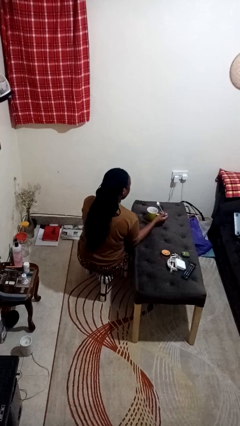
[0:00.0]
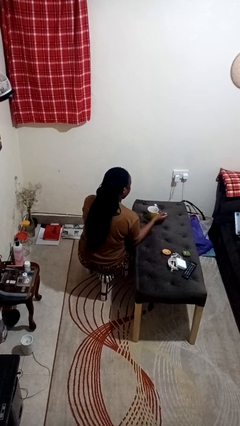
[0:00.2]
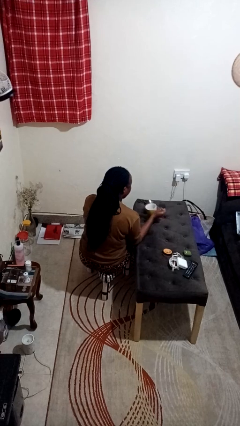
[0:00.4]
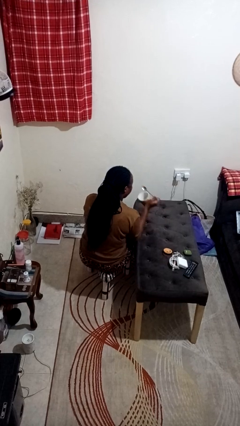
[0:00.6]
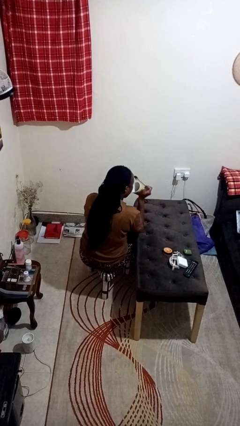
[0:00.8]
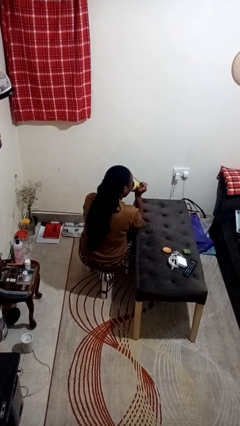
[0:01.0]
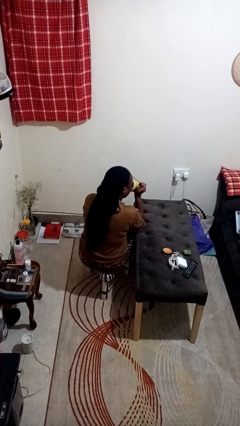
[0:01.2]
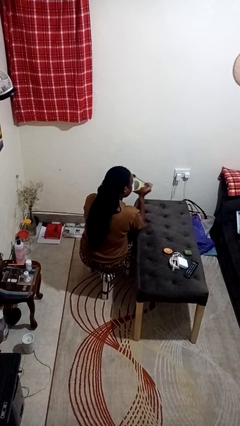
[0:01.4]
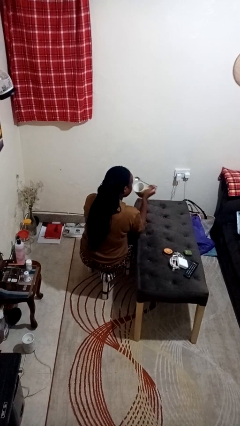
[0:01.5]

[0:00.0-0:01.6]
person drinks from mug

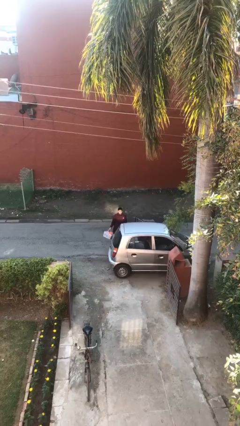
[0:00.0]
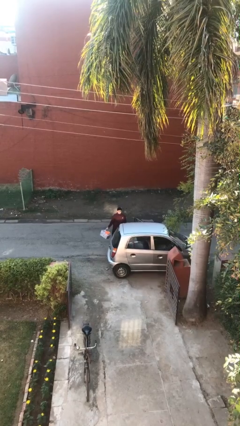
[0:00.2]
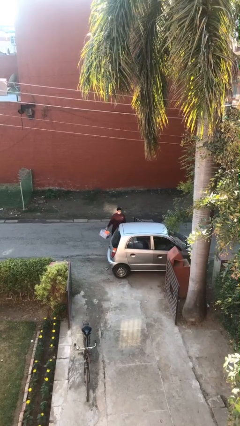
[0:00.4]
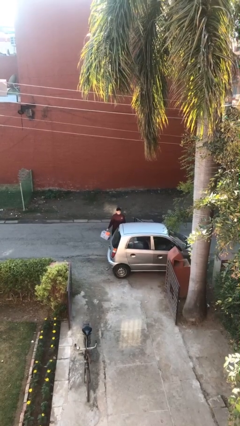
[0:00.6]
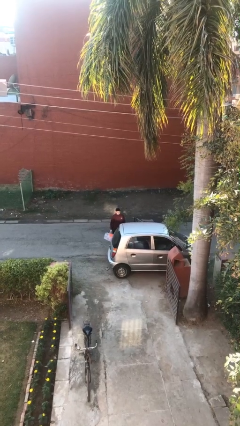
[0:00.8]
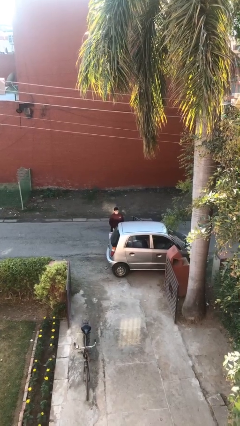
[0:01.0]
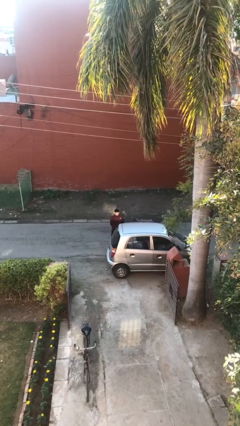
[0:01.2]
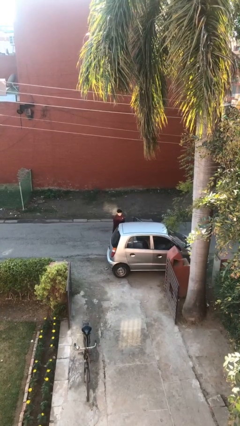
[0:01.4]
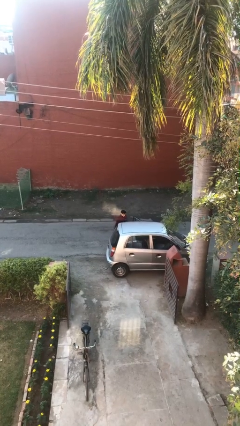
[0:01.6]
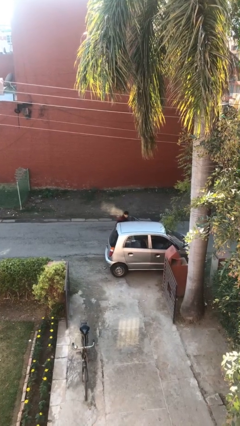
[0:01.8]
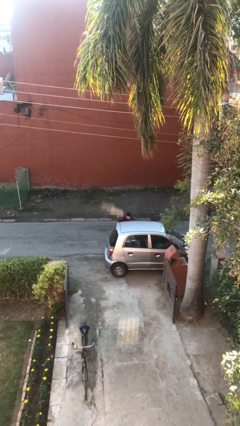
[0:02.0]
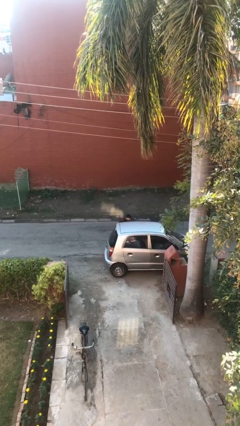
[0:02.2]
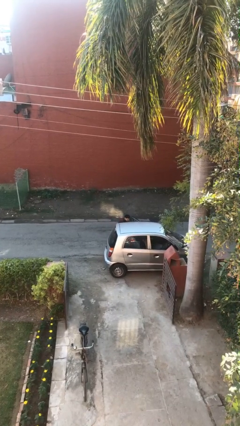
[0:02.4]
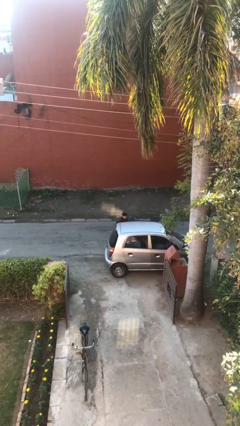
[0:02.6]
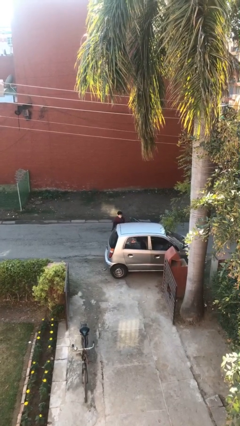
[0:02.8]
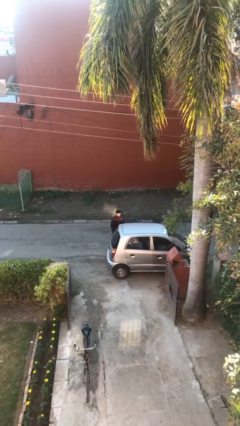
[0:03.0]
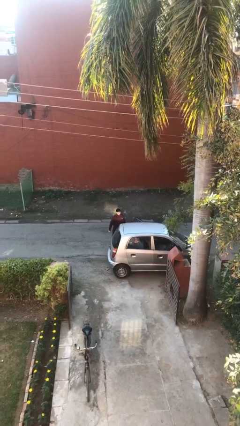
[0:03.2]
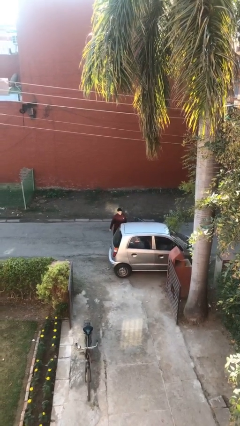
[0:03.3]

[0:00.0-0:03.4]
person loads car

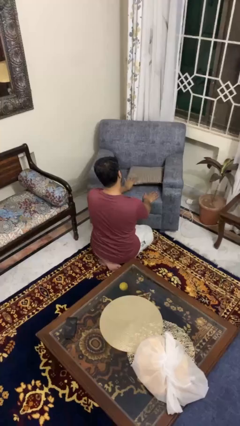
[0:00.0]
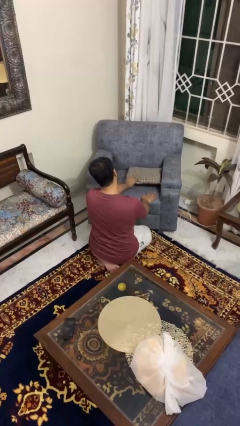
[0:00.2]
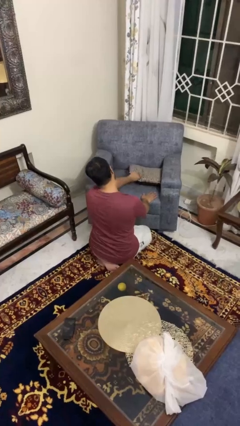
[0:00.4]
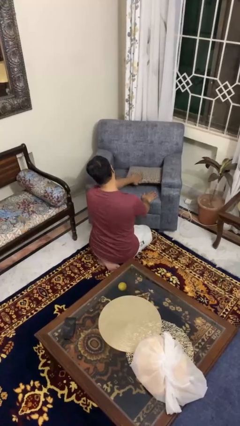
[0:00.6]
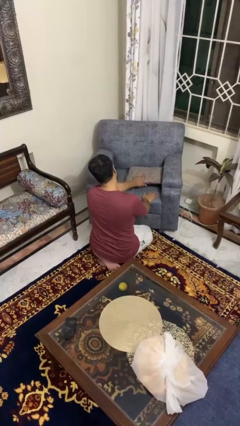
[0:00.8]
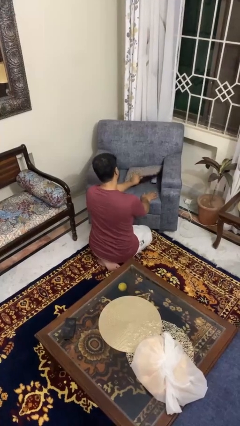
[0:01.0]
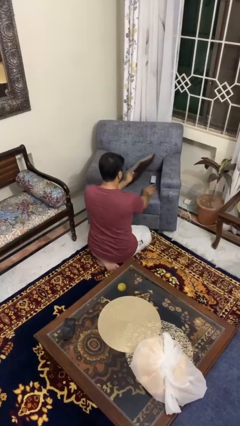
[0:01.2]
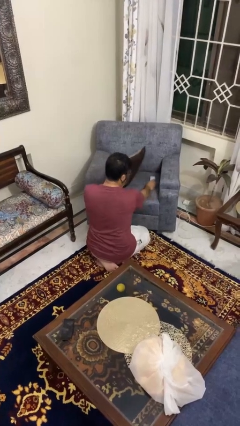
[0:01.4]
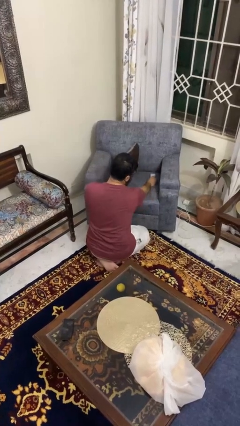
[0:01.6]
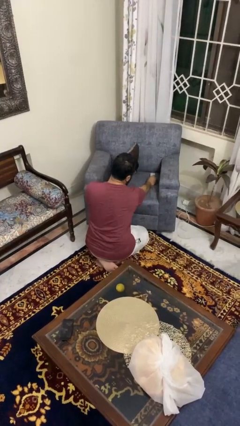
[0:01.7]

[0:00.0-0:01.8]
person searches in couch

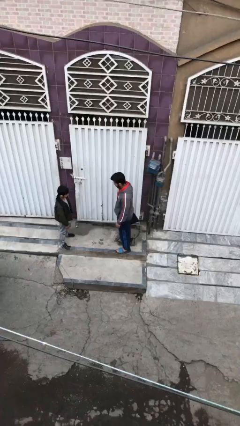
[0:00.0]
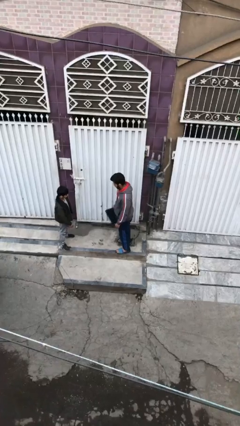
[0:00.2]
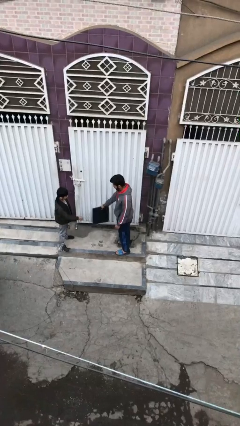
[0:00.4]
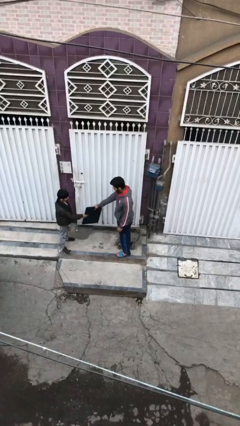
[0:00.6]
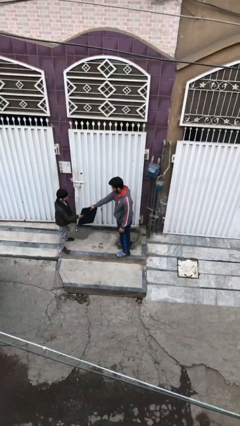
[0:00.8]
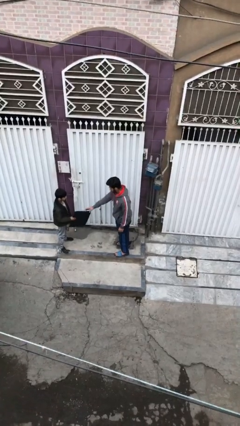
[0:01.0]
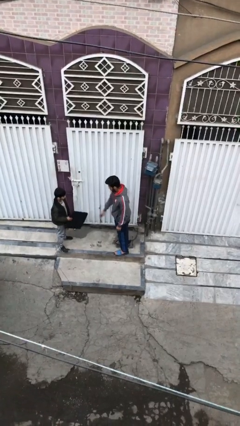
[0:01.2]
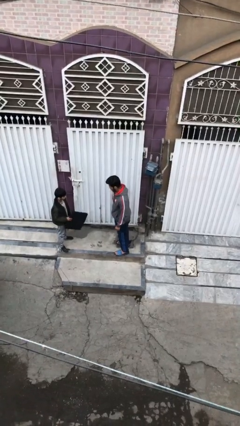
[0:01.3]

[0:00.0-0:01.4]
person transfers object to person

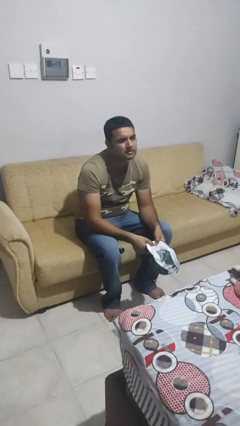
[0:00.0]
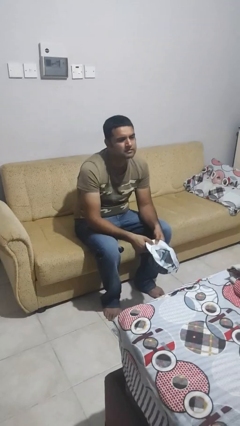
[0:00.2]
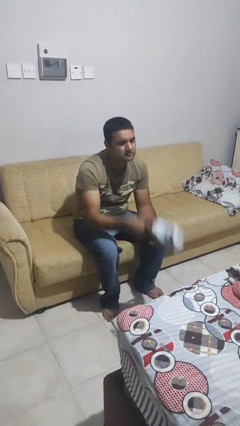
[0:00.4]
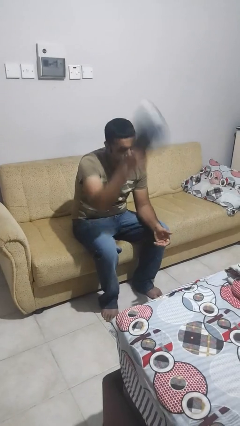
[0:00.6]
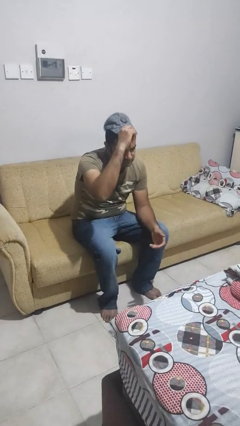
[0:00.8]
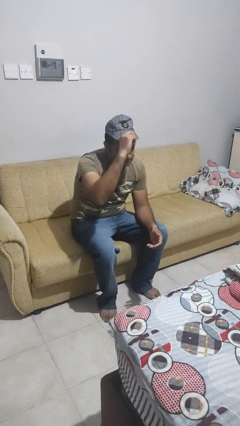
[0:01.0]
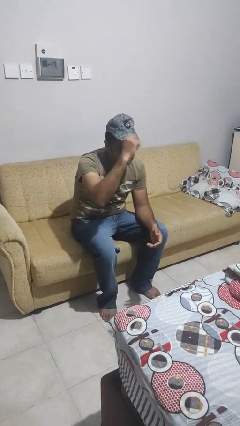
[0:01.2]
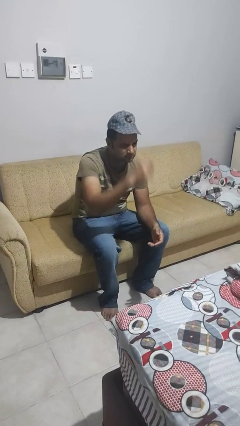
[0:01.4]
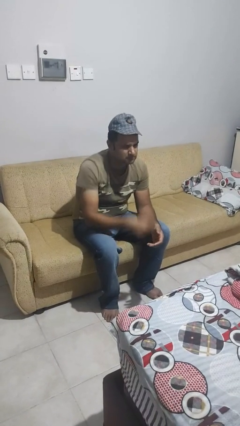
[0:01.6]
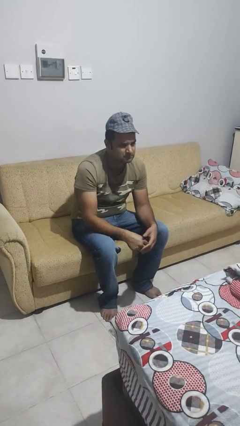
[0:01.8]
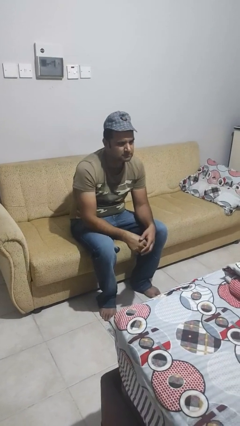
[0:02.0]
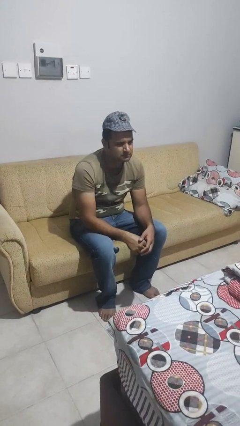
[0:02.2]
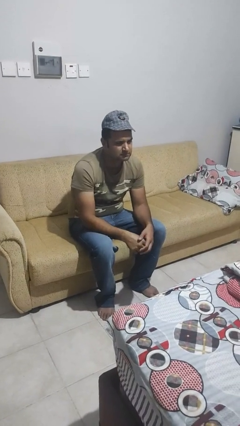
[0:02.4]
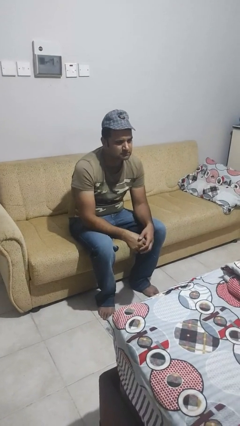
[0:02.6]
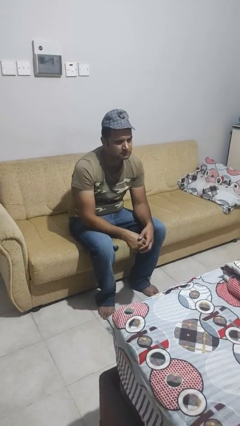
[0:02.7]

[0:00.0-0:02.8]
person puts on hat

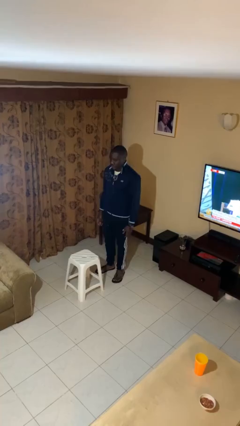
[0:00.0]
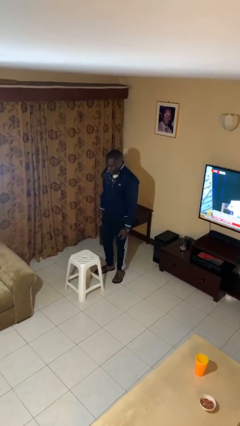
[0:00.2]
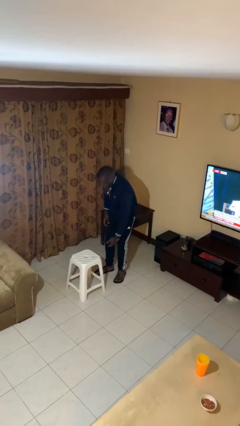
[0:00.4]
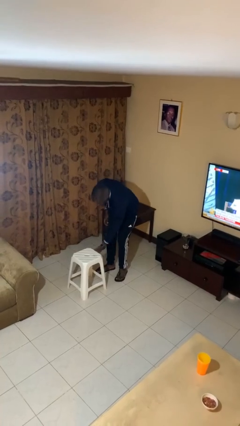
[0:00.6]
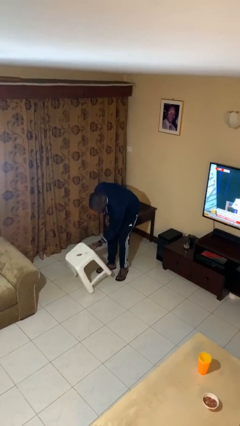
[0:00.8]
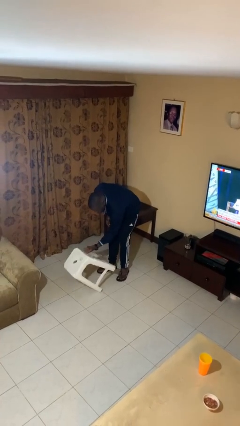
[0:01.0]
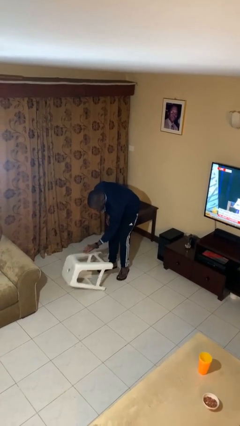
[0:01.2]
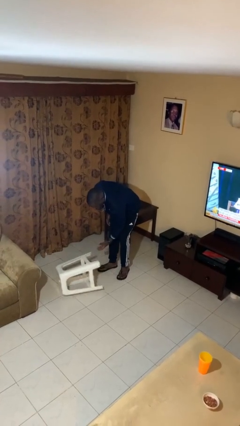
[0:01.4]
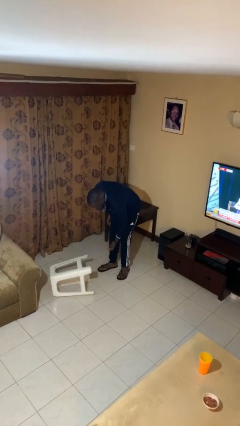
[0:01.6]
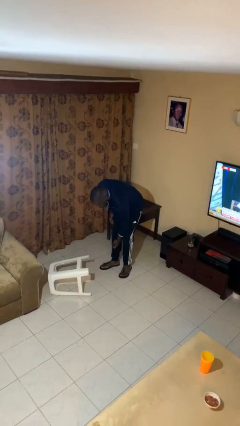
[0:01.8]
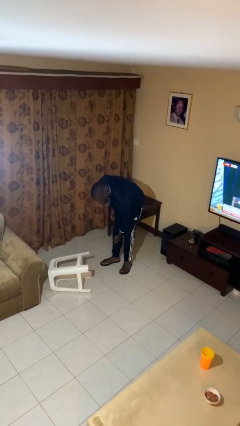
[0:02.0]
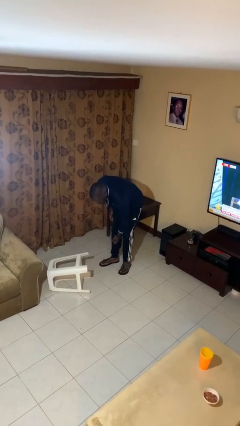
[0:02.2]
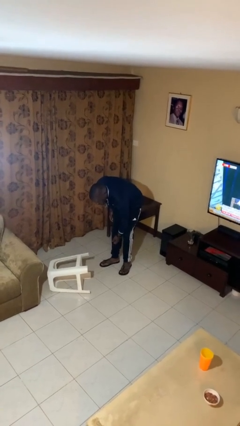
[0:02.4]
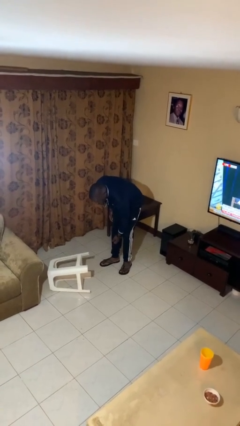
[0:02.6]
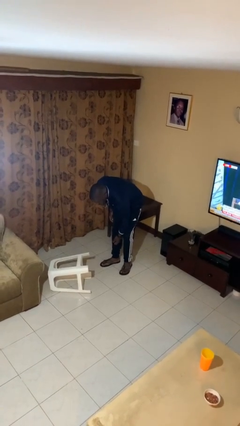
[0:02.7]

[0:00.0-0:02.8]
person knocks over furniture

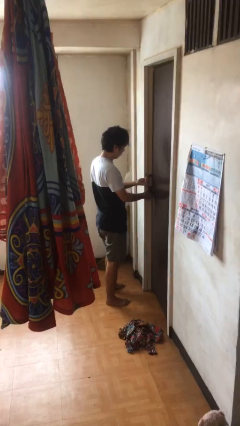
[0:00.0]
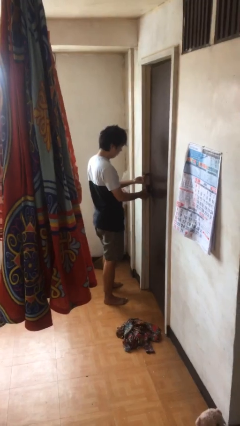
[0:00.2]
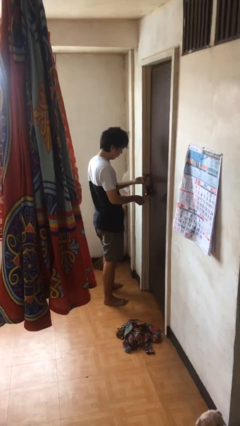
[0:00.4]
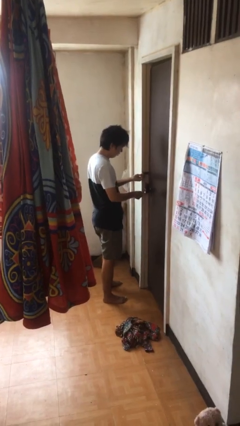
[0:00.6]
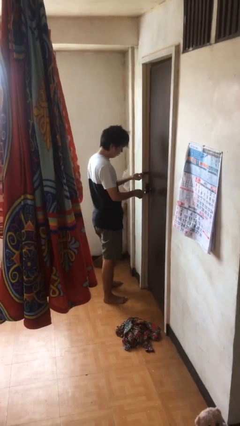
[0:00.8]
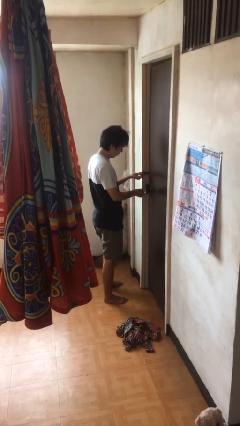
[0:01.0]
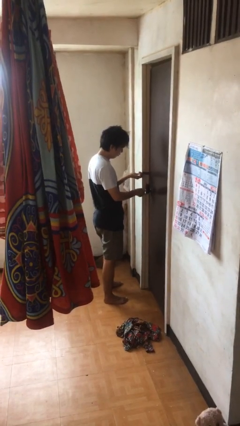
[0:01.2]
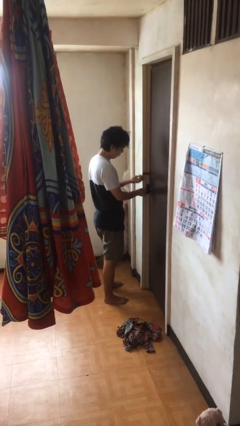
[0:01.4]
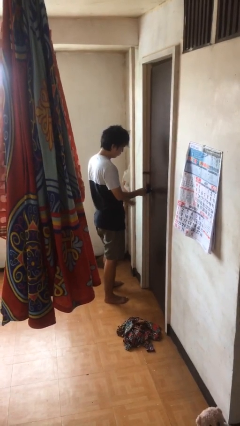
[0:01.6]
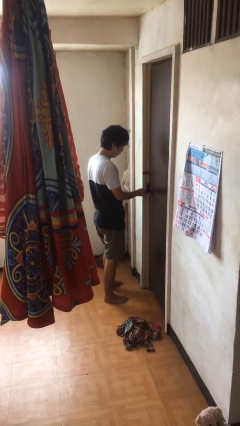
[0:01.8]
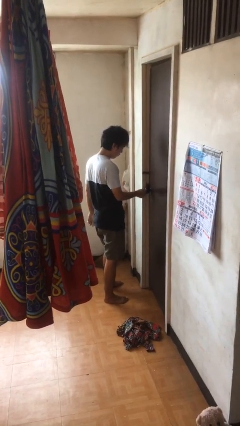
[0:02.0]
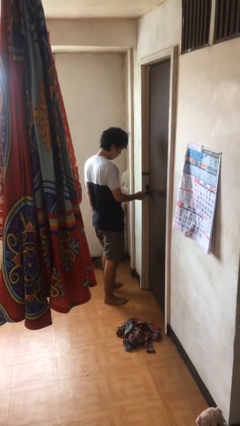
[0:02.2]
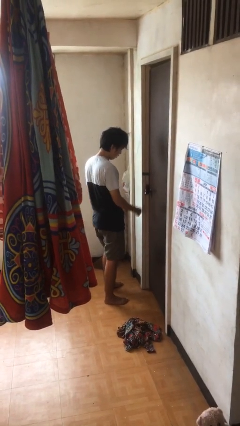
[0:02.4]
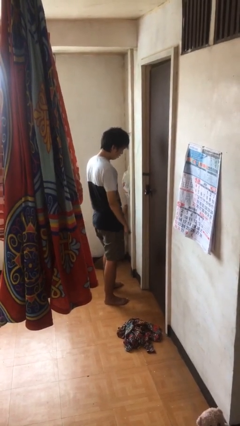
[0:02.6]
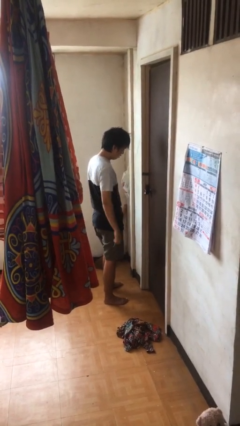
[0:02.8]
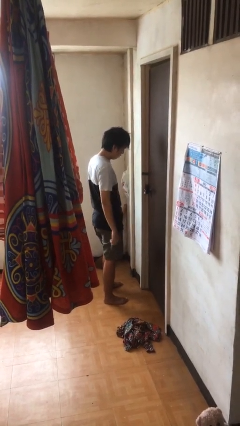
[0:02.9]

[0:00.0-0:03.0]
person locks door with keys

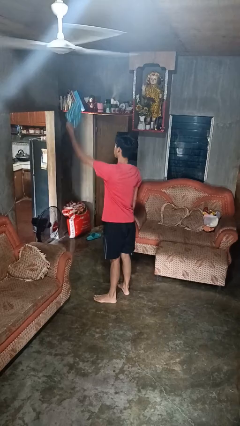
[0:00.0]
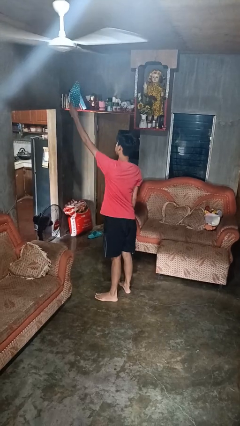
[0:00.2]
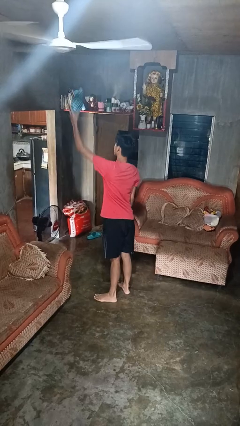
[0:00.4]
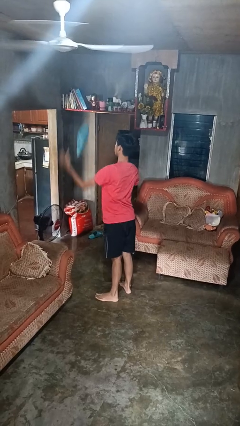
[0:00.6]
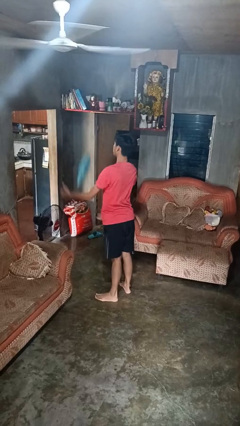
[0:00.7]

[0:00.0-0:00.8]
person drops object
